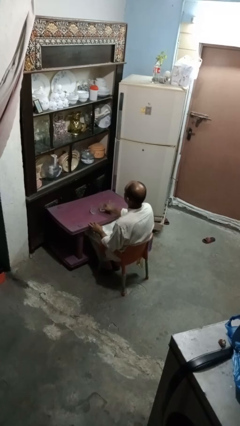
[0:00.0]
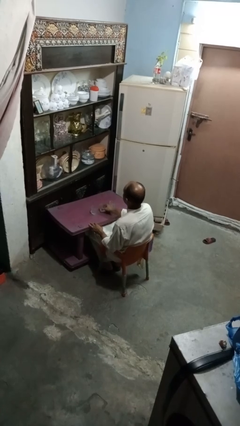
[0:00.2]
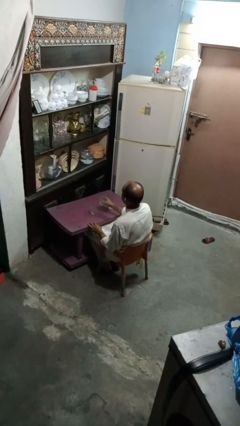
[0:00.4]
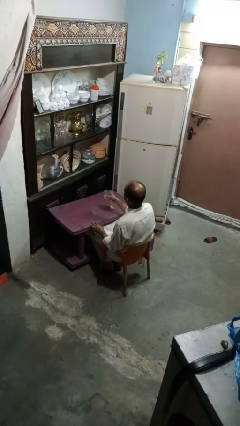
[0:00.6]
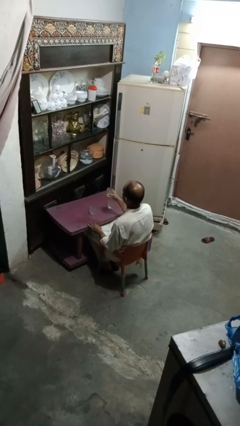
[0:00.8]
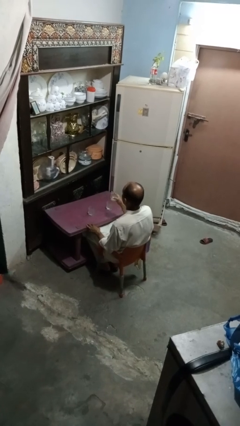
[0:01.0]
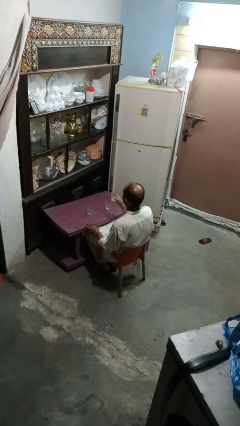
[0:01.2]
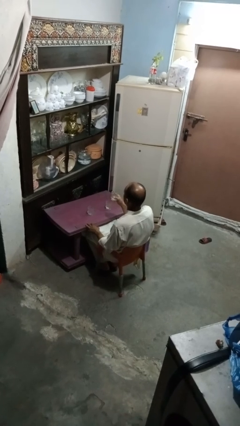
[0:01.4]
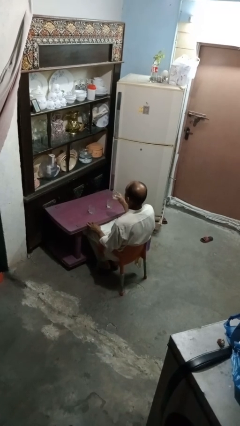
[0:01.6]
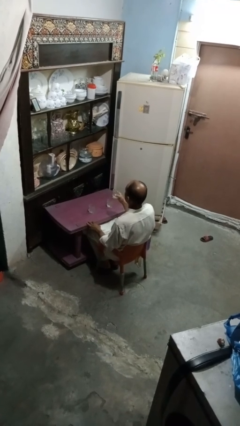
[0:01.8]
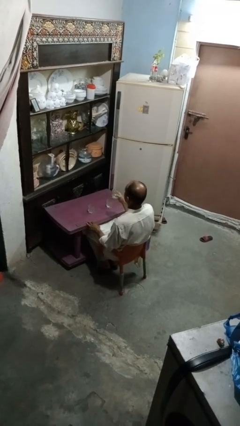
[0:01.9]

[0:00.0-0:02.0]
person picks up object from table

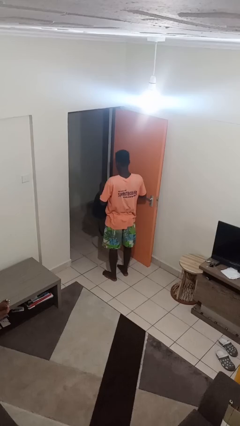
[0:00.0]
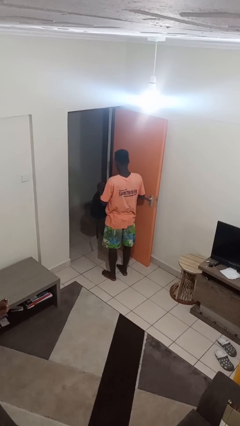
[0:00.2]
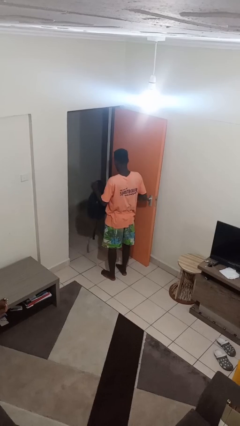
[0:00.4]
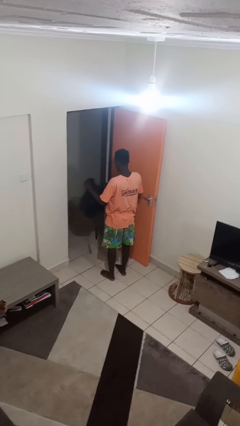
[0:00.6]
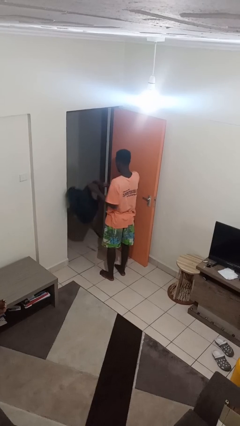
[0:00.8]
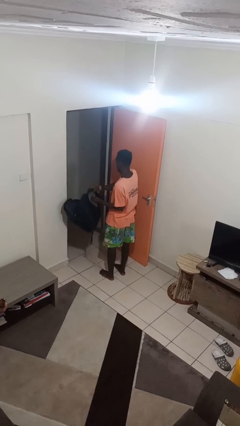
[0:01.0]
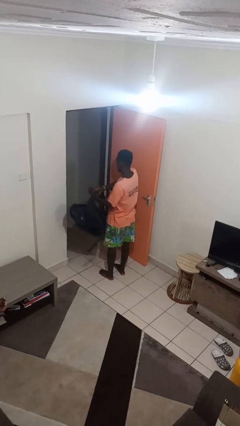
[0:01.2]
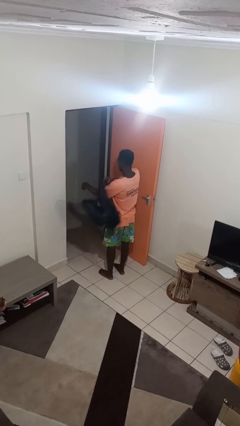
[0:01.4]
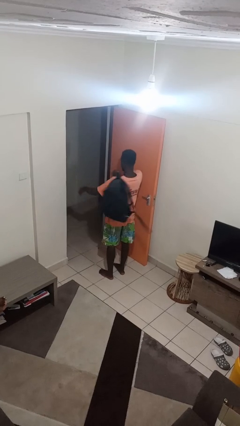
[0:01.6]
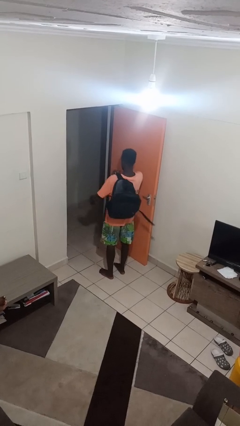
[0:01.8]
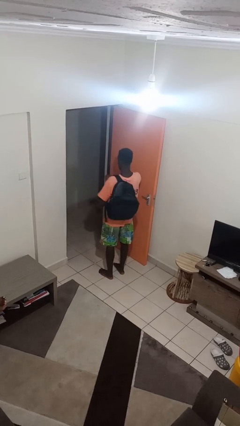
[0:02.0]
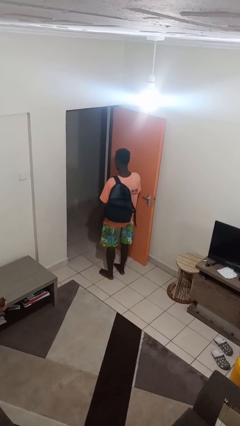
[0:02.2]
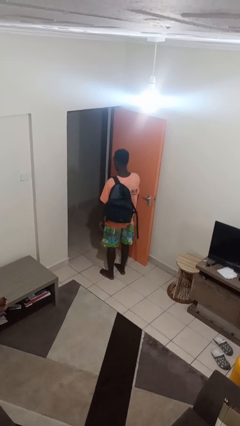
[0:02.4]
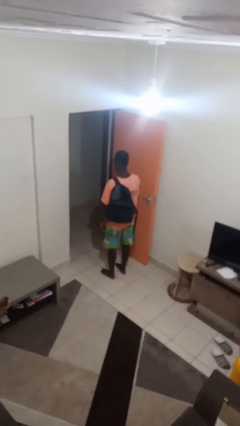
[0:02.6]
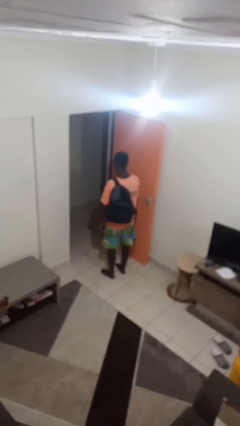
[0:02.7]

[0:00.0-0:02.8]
person puts object into backpack

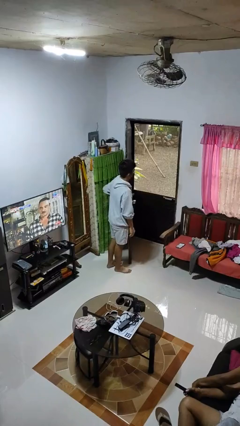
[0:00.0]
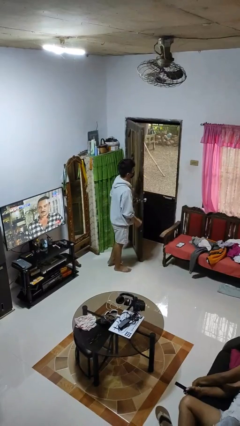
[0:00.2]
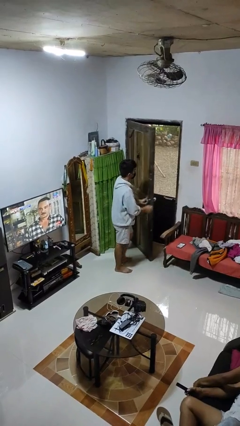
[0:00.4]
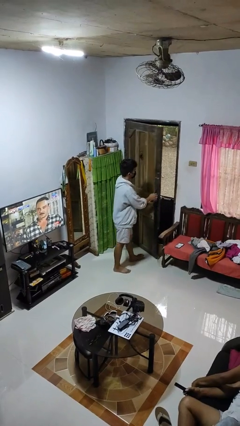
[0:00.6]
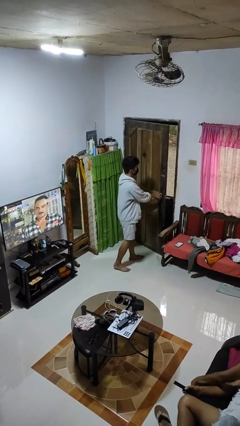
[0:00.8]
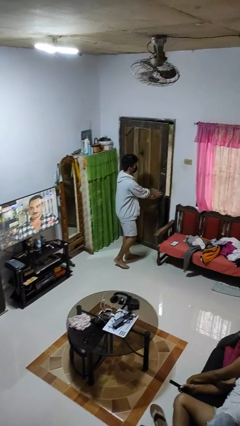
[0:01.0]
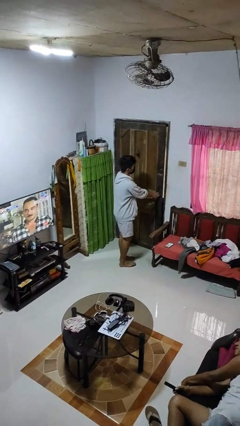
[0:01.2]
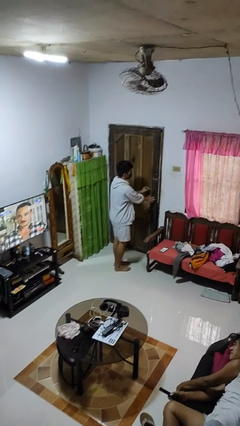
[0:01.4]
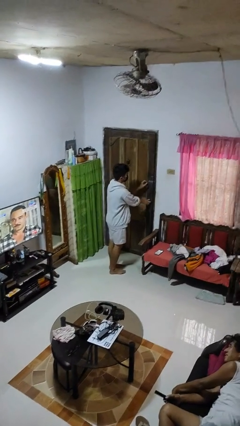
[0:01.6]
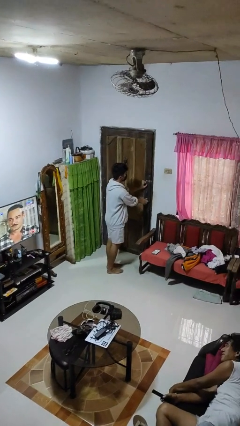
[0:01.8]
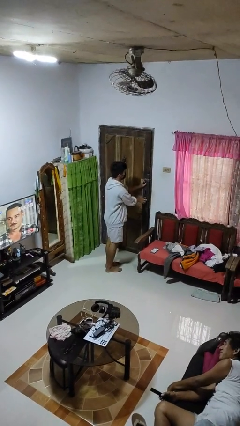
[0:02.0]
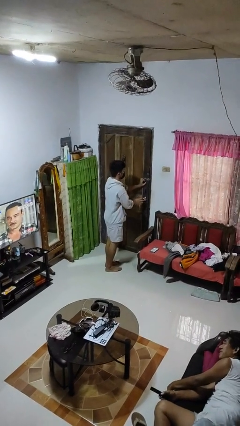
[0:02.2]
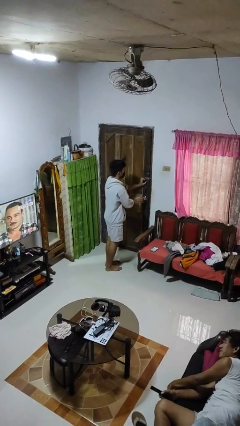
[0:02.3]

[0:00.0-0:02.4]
person closes facility door

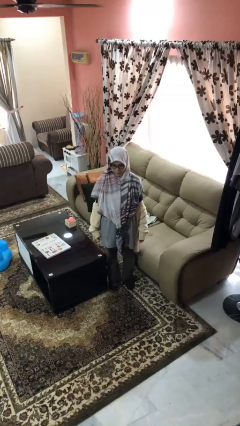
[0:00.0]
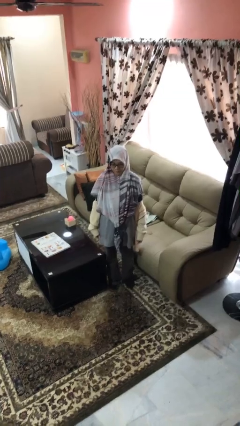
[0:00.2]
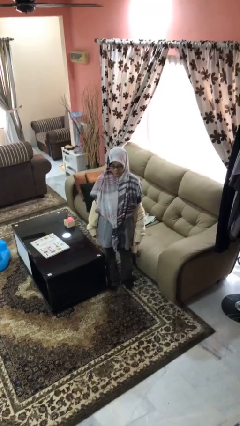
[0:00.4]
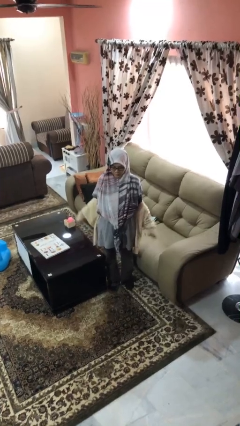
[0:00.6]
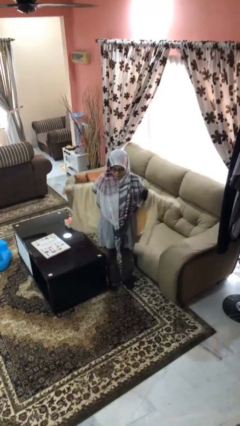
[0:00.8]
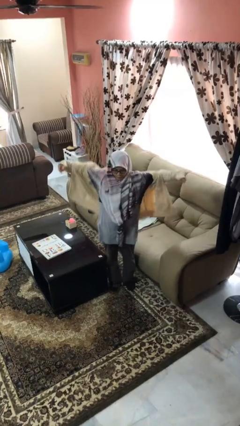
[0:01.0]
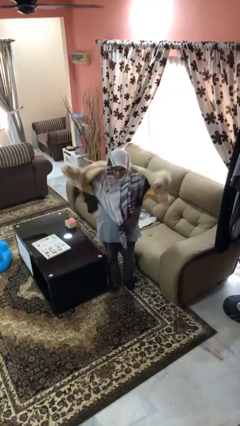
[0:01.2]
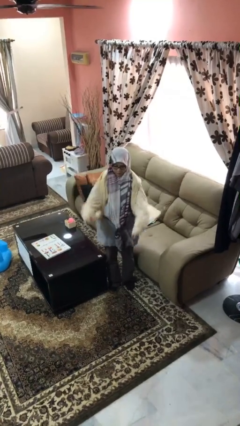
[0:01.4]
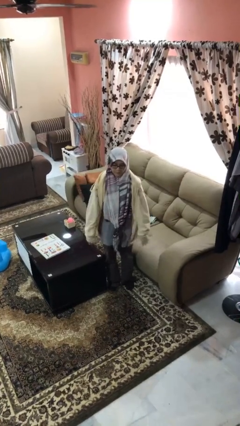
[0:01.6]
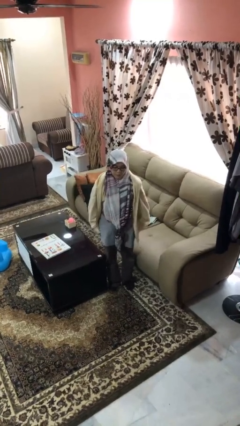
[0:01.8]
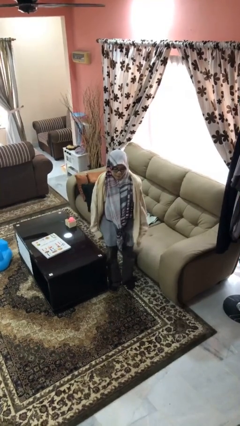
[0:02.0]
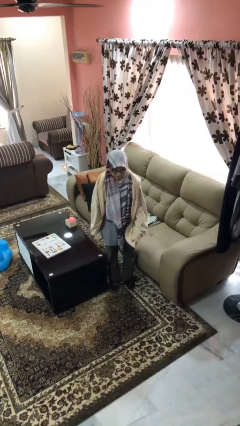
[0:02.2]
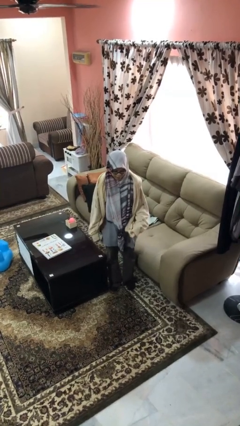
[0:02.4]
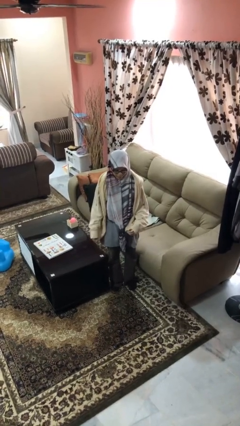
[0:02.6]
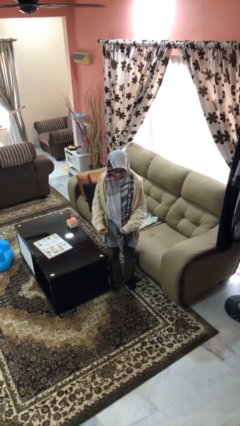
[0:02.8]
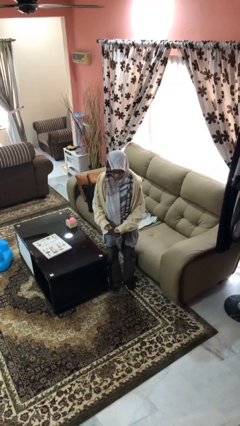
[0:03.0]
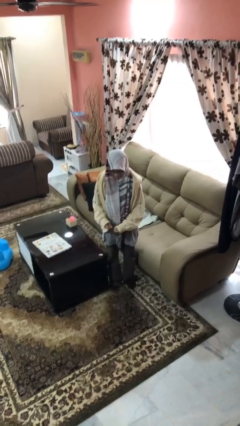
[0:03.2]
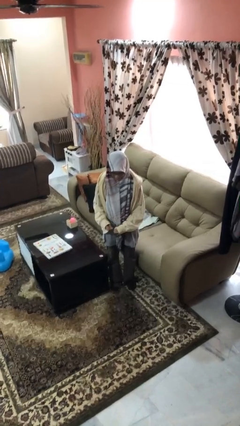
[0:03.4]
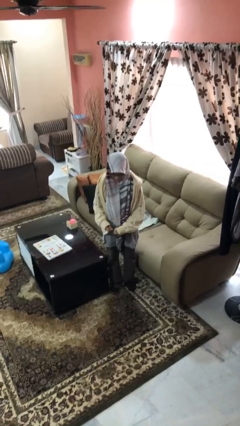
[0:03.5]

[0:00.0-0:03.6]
person puts on jacket

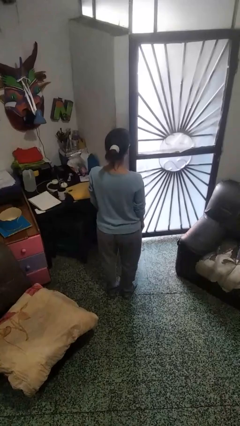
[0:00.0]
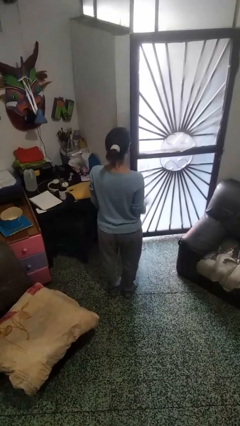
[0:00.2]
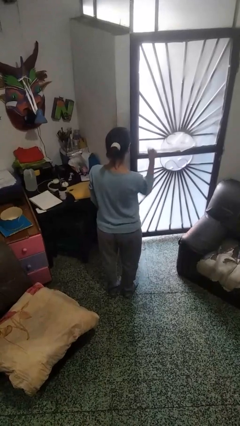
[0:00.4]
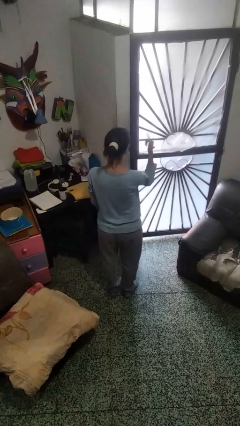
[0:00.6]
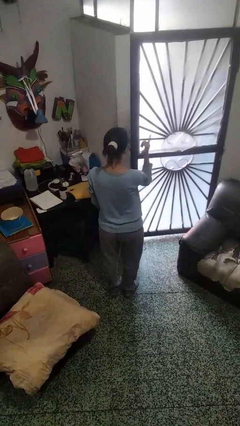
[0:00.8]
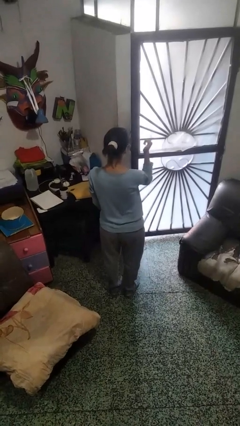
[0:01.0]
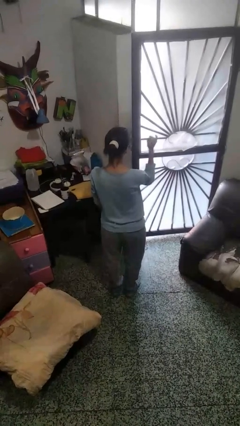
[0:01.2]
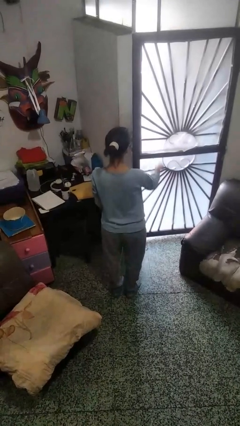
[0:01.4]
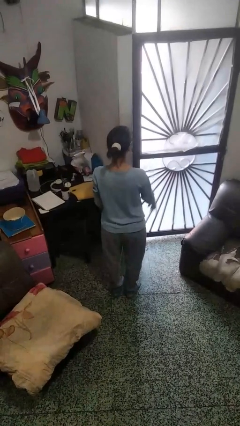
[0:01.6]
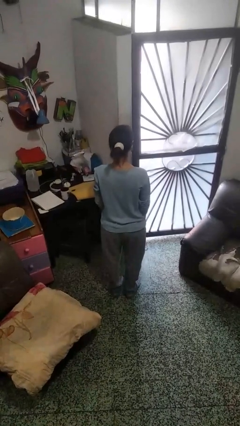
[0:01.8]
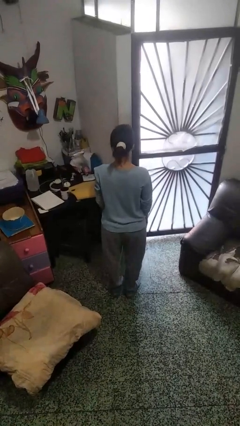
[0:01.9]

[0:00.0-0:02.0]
person gestures hang loose

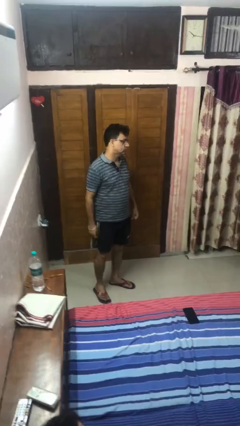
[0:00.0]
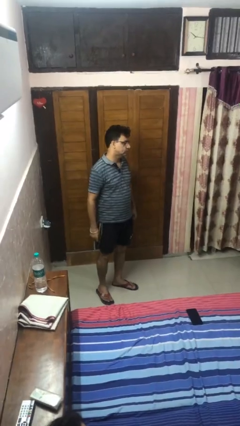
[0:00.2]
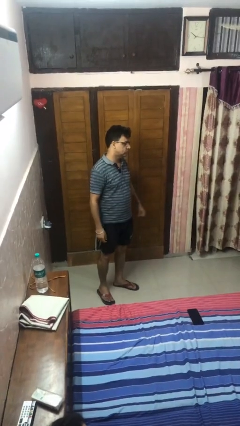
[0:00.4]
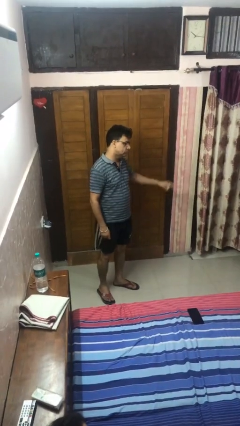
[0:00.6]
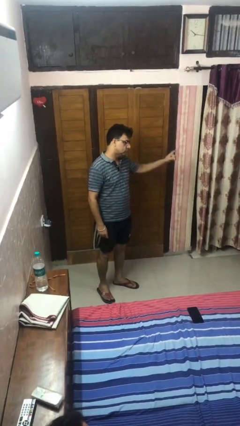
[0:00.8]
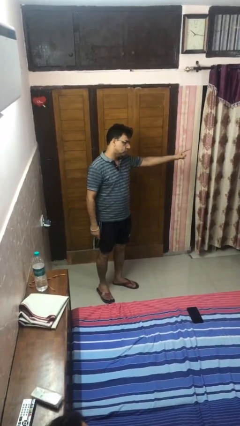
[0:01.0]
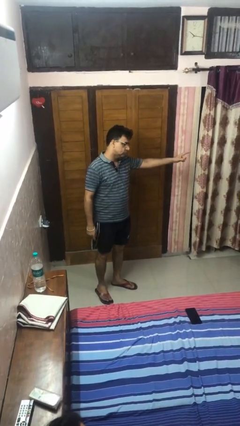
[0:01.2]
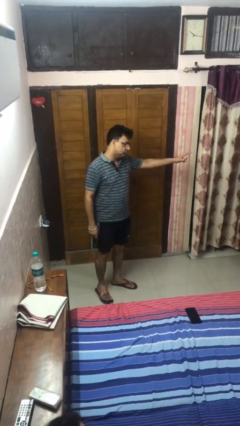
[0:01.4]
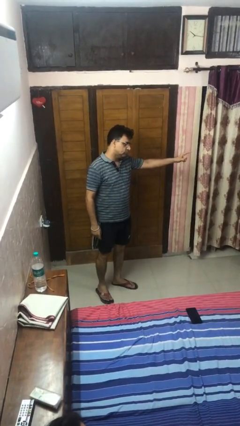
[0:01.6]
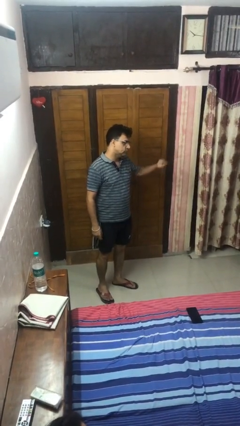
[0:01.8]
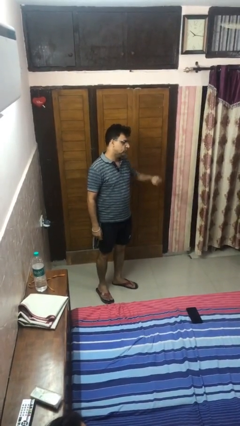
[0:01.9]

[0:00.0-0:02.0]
person points at person

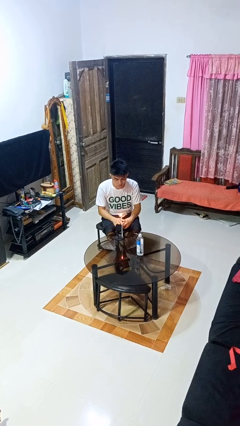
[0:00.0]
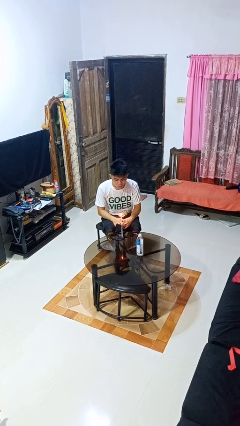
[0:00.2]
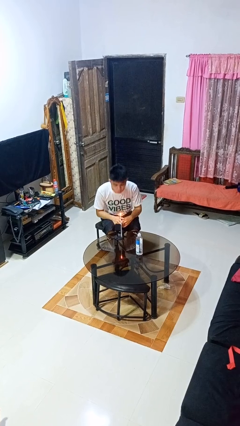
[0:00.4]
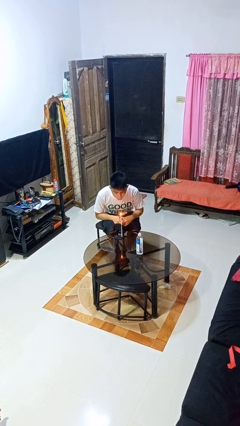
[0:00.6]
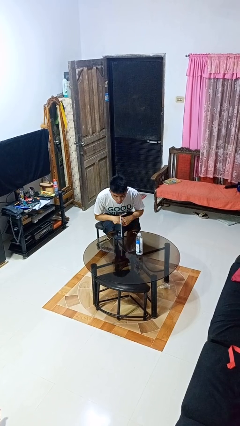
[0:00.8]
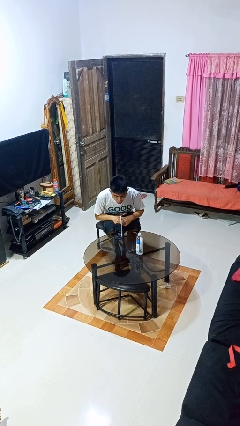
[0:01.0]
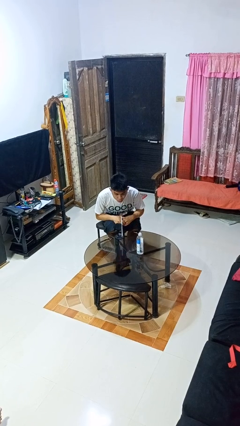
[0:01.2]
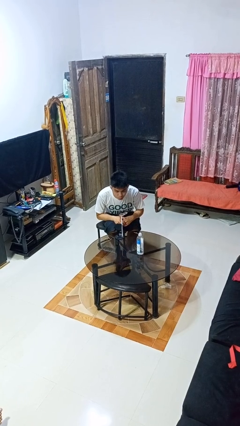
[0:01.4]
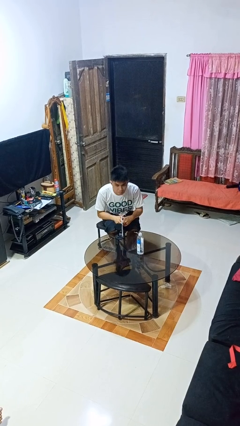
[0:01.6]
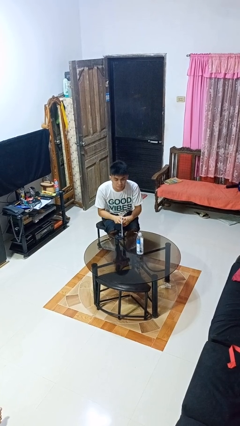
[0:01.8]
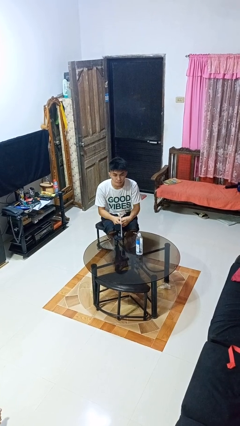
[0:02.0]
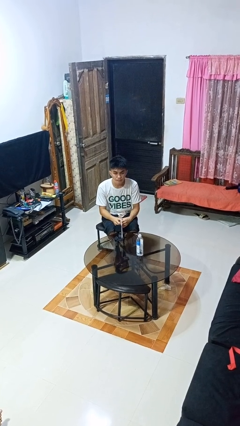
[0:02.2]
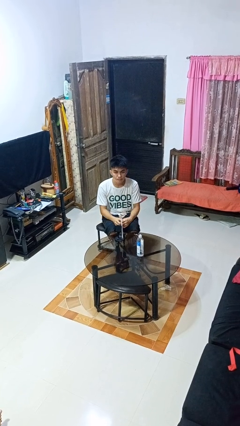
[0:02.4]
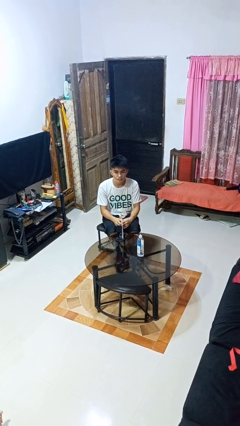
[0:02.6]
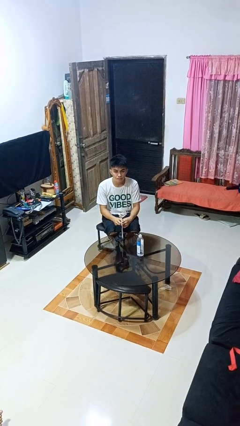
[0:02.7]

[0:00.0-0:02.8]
person extinguishes candle
